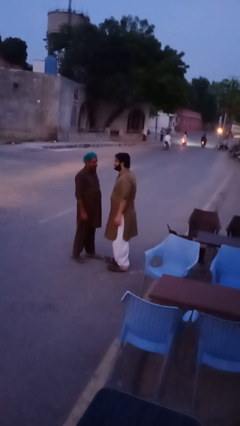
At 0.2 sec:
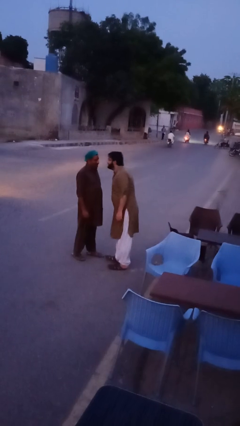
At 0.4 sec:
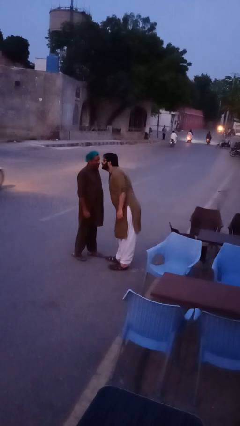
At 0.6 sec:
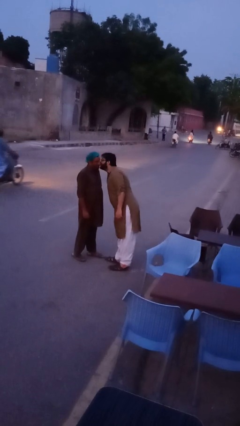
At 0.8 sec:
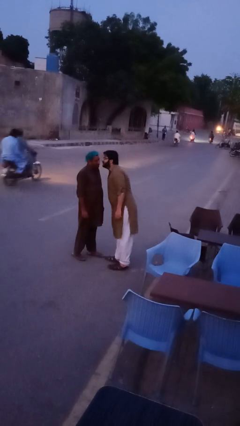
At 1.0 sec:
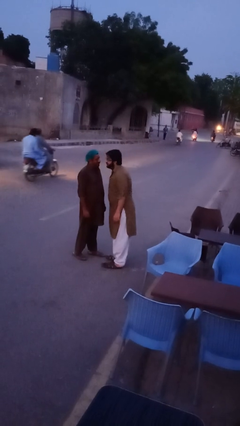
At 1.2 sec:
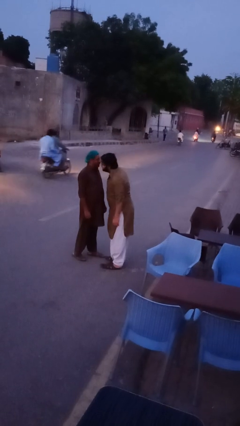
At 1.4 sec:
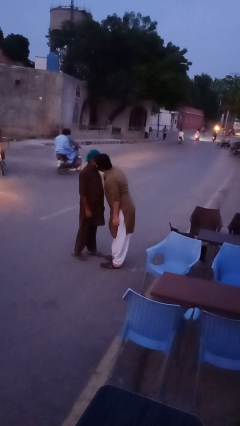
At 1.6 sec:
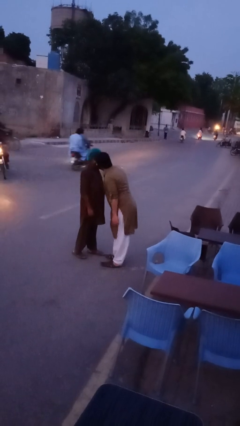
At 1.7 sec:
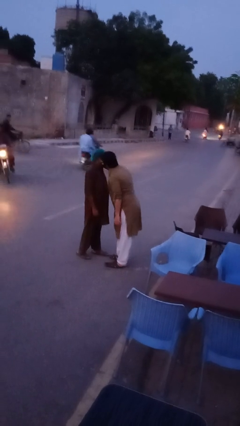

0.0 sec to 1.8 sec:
person kisses cheek of person

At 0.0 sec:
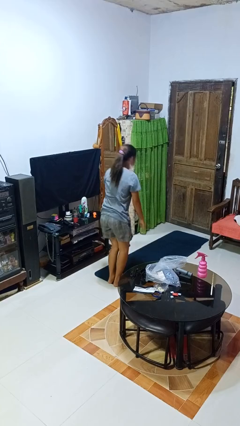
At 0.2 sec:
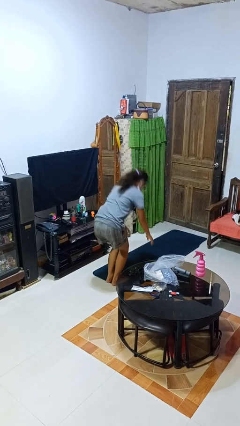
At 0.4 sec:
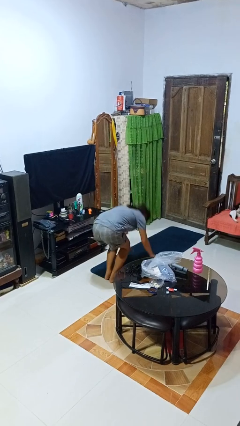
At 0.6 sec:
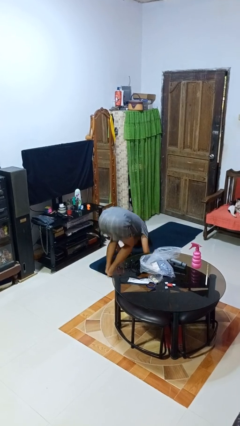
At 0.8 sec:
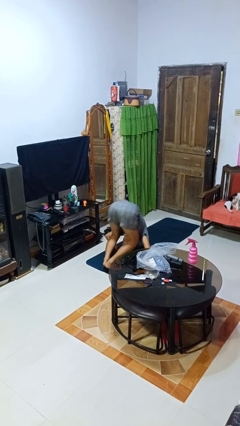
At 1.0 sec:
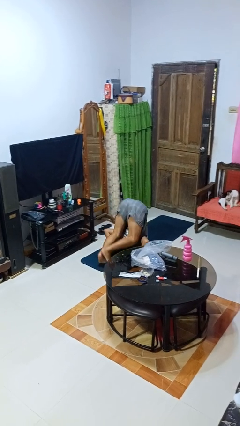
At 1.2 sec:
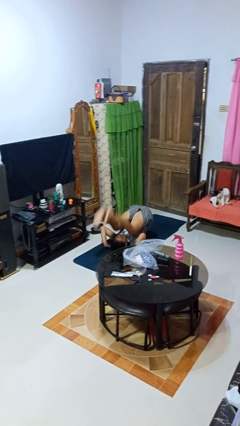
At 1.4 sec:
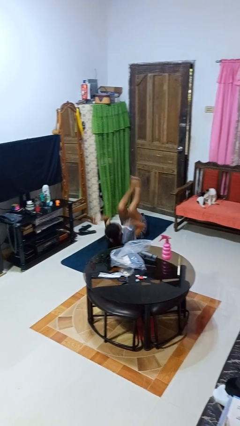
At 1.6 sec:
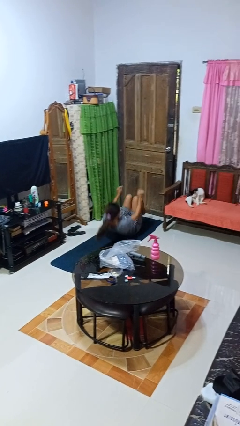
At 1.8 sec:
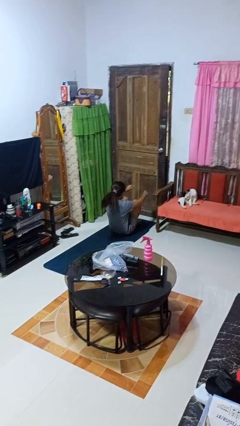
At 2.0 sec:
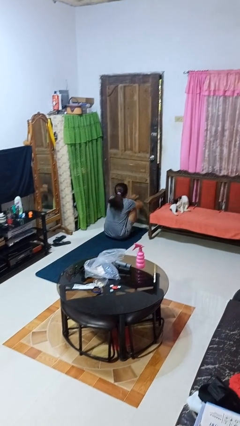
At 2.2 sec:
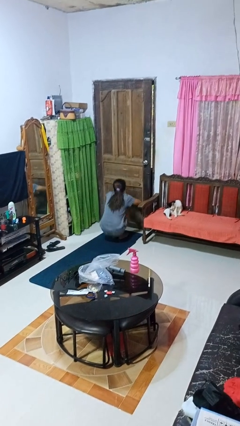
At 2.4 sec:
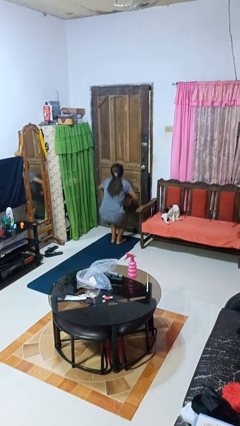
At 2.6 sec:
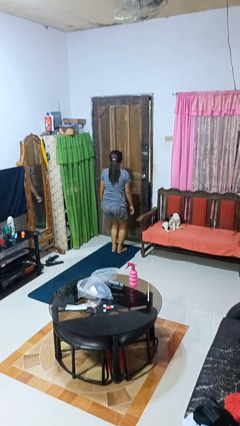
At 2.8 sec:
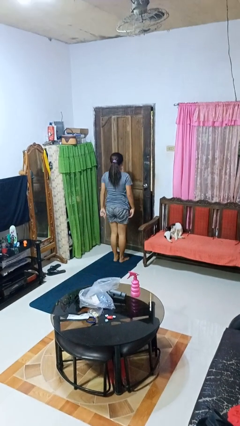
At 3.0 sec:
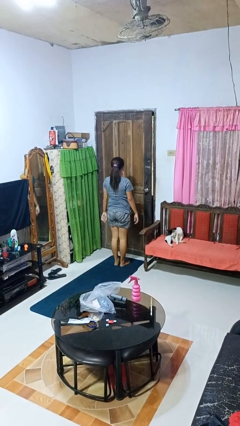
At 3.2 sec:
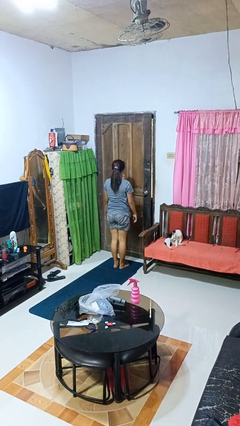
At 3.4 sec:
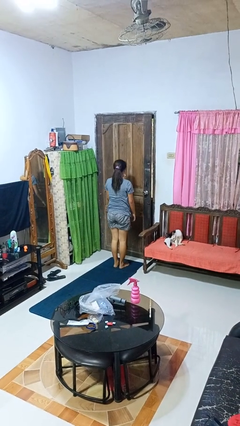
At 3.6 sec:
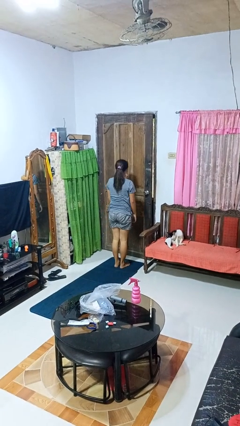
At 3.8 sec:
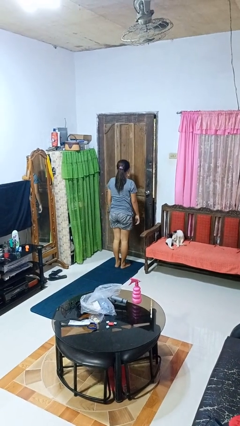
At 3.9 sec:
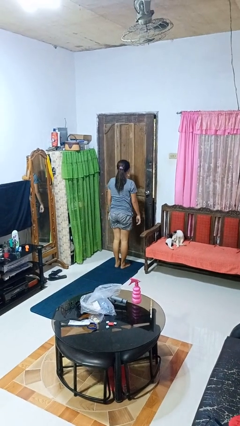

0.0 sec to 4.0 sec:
person somersaults

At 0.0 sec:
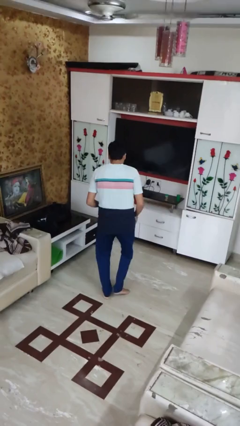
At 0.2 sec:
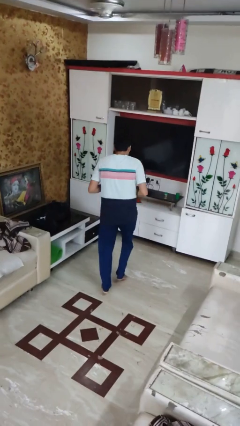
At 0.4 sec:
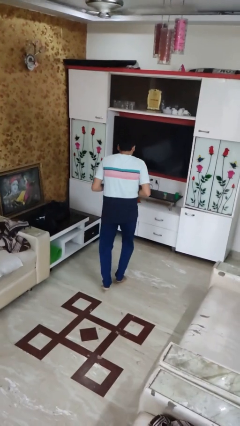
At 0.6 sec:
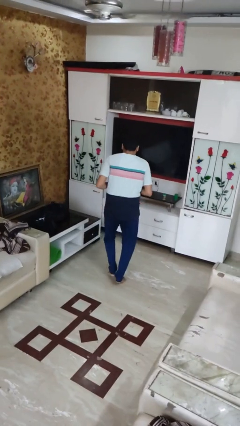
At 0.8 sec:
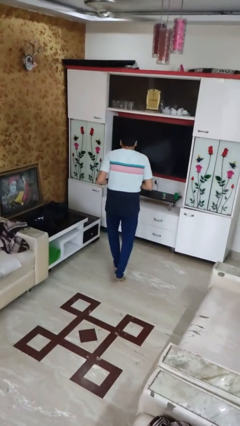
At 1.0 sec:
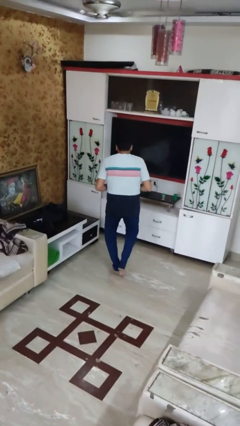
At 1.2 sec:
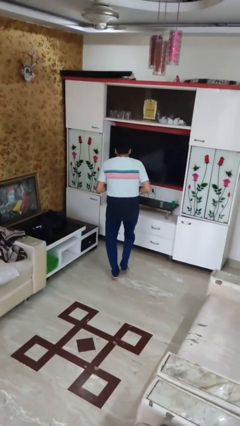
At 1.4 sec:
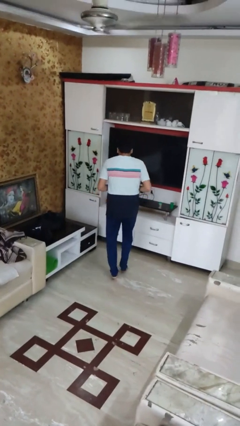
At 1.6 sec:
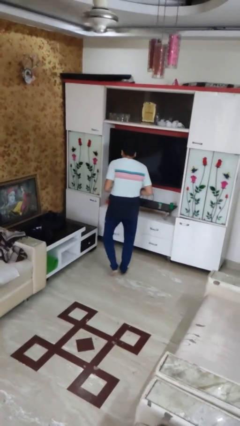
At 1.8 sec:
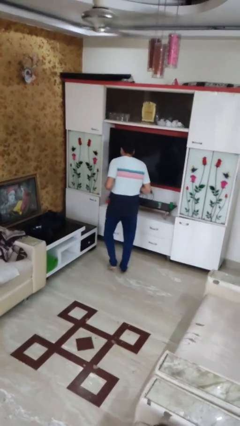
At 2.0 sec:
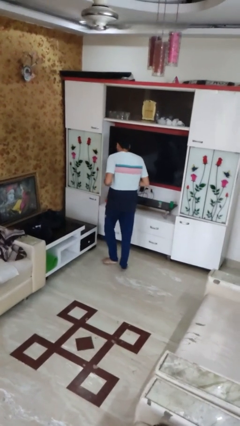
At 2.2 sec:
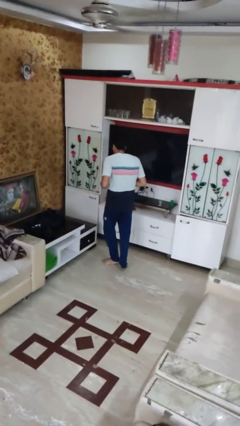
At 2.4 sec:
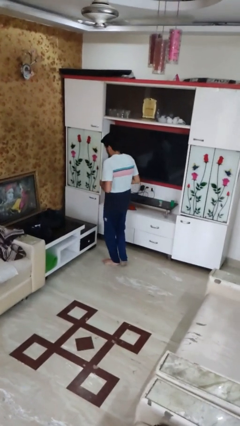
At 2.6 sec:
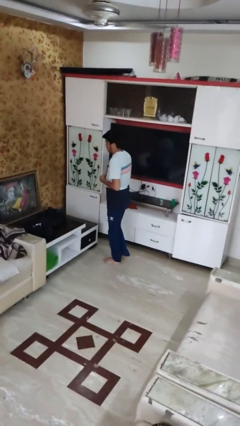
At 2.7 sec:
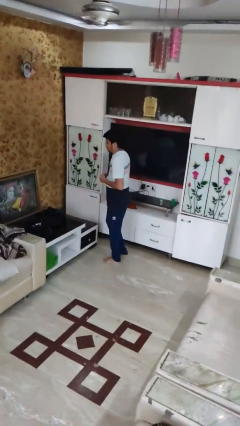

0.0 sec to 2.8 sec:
person walks tiptoe

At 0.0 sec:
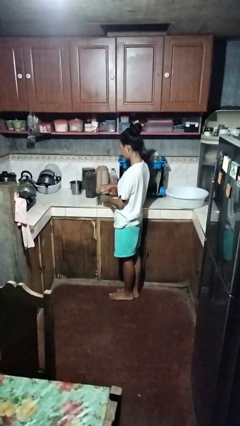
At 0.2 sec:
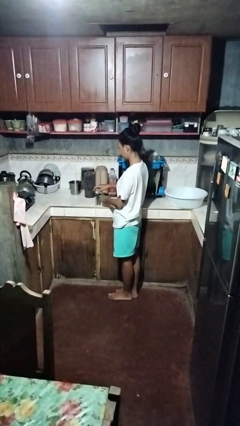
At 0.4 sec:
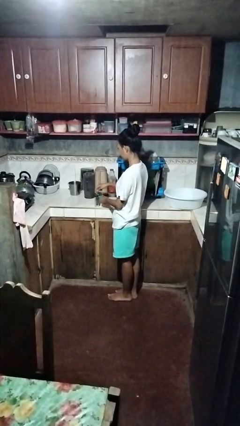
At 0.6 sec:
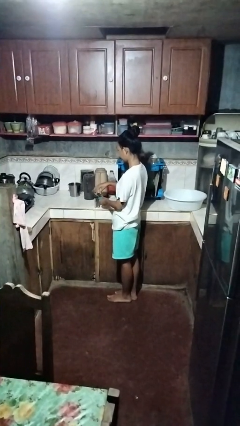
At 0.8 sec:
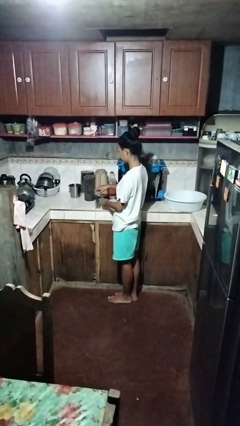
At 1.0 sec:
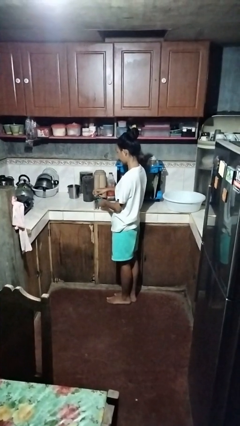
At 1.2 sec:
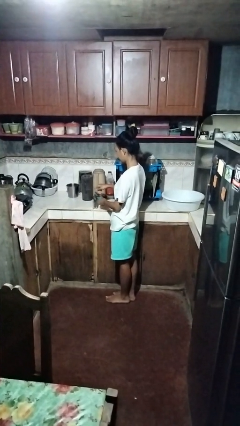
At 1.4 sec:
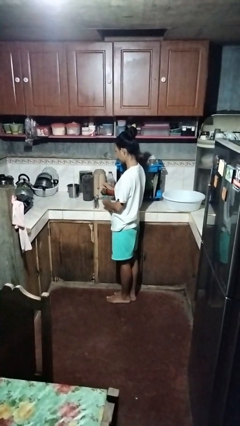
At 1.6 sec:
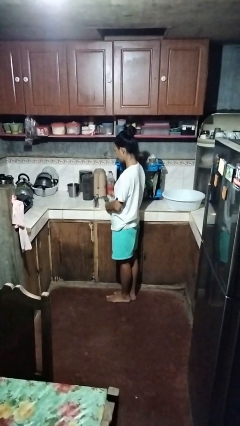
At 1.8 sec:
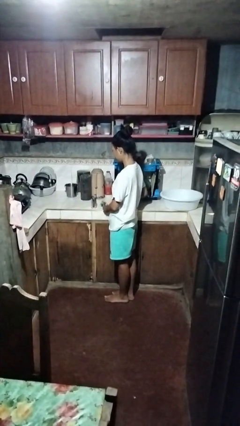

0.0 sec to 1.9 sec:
person opens can with can opener

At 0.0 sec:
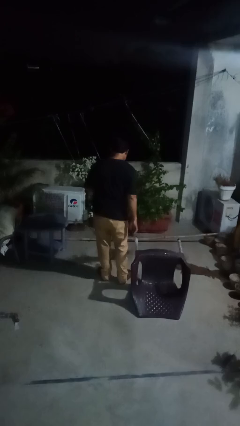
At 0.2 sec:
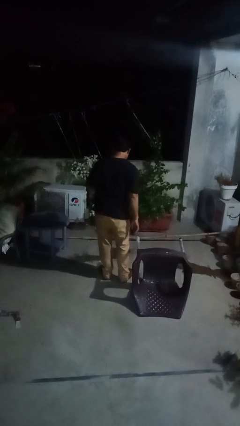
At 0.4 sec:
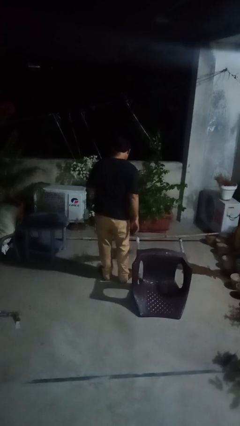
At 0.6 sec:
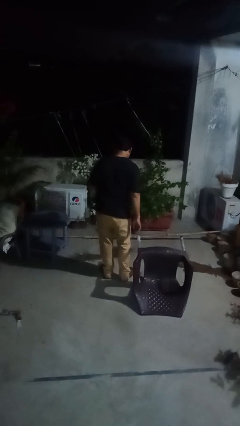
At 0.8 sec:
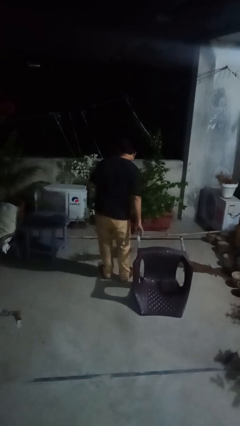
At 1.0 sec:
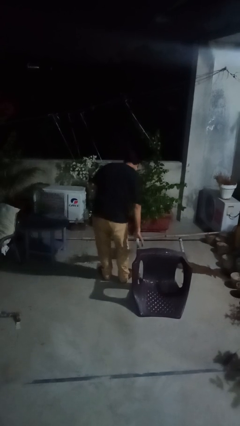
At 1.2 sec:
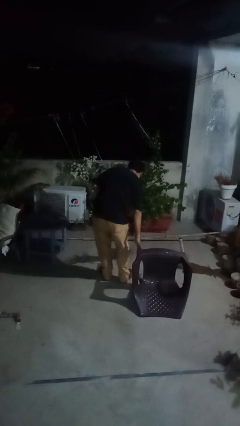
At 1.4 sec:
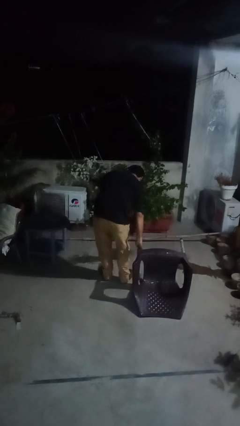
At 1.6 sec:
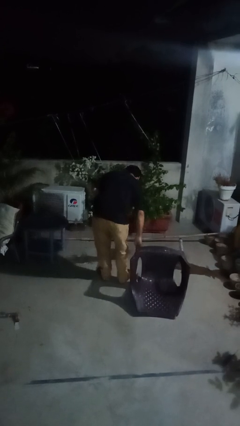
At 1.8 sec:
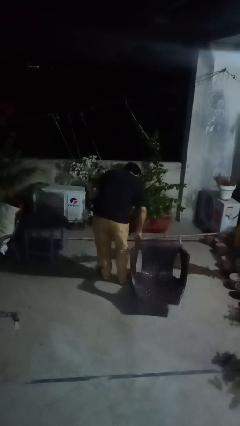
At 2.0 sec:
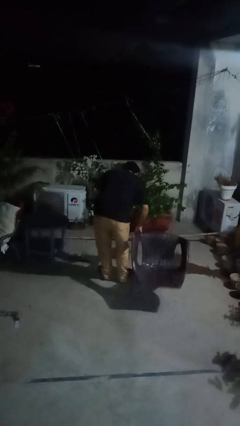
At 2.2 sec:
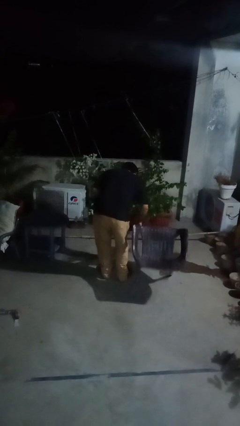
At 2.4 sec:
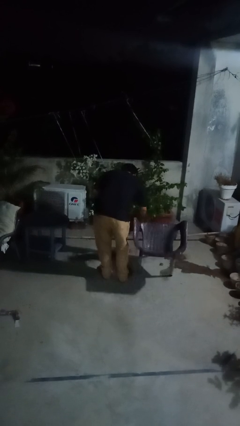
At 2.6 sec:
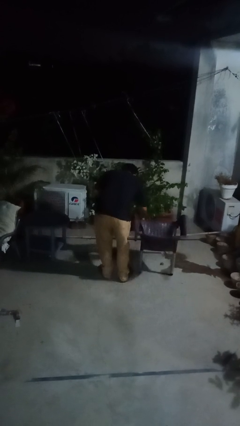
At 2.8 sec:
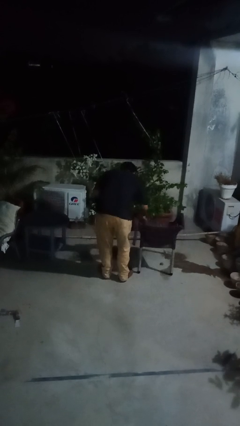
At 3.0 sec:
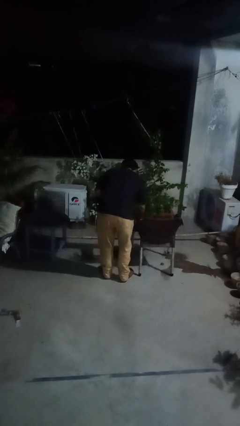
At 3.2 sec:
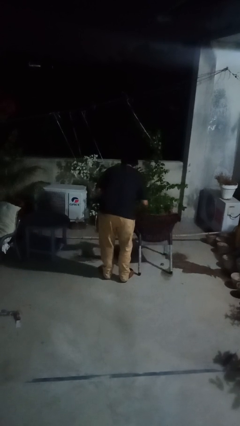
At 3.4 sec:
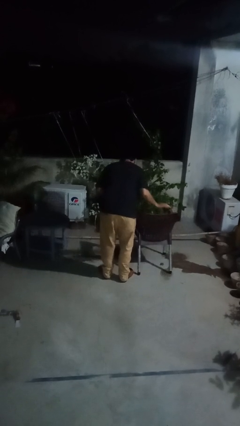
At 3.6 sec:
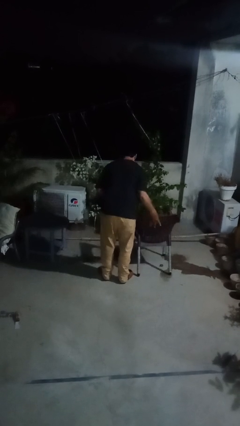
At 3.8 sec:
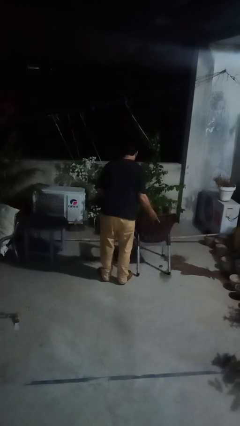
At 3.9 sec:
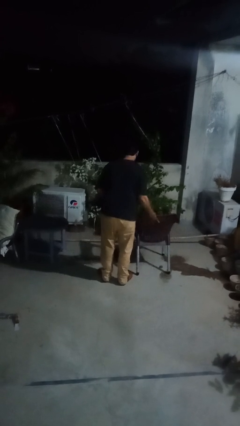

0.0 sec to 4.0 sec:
person sets upright furniture

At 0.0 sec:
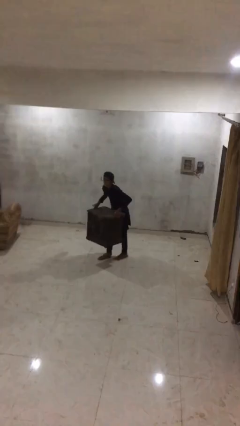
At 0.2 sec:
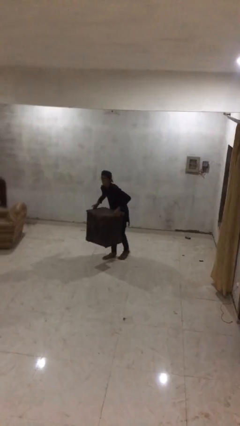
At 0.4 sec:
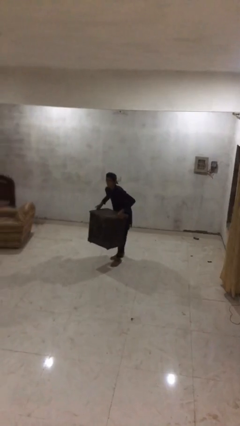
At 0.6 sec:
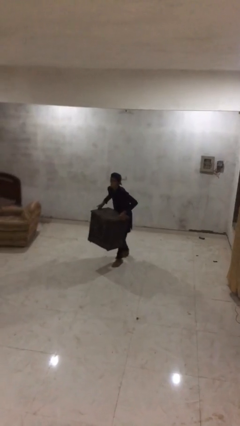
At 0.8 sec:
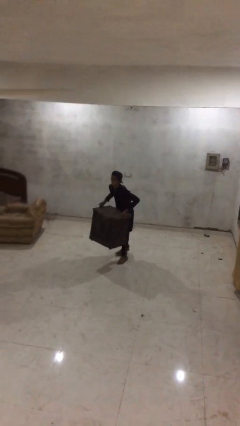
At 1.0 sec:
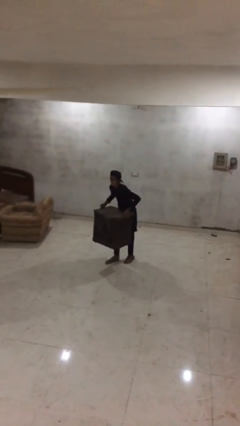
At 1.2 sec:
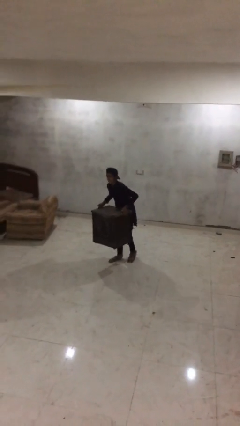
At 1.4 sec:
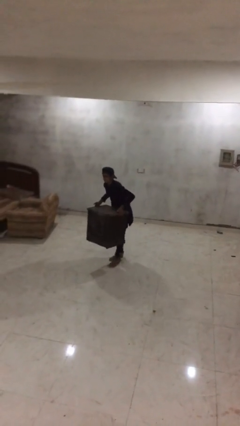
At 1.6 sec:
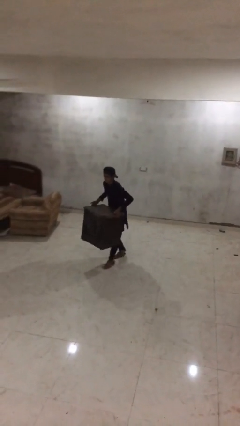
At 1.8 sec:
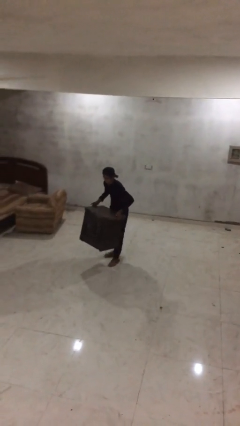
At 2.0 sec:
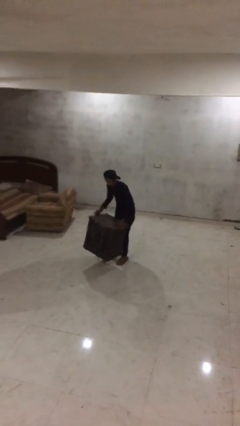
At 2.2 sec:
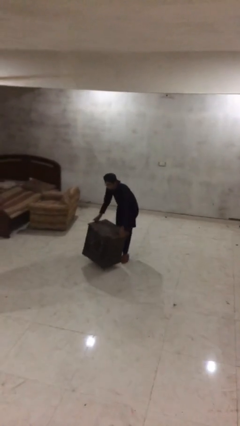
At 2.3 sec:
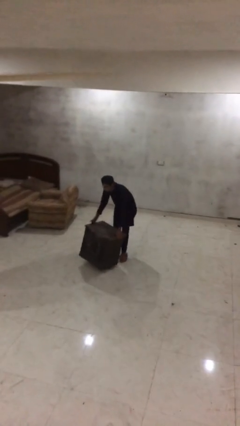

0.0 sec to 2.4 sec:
person carries heavy object

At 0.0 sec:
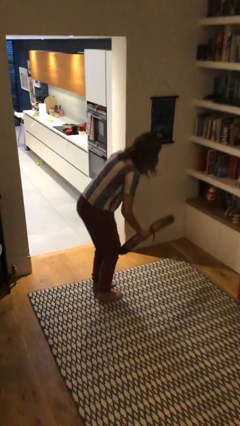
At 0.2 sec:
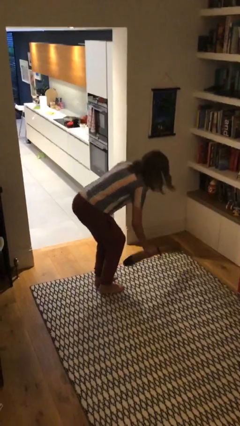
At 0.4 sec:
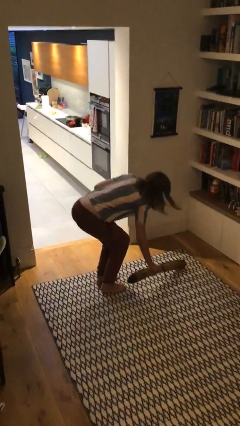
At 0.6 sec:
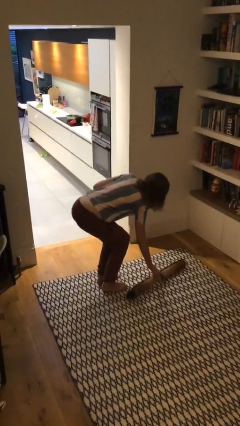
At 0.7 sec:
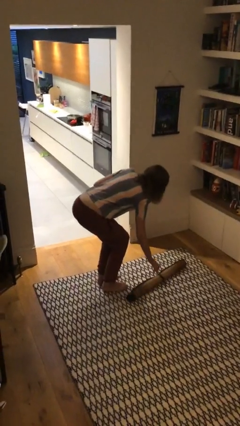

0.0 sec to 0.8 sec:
person puts down object on floor
